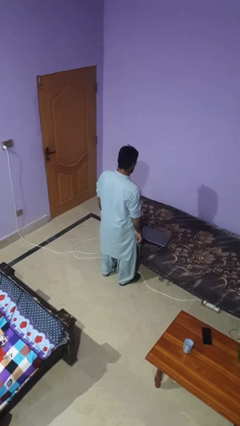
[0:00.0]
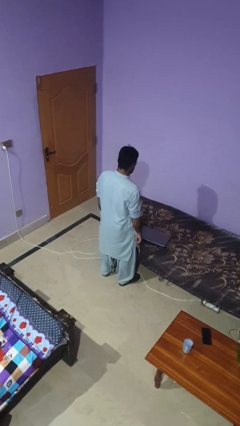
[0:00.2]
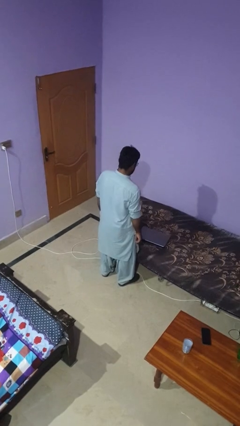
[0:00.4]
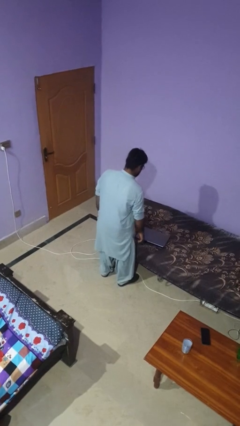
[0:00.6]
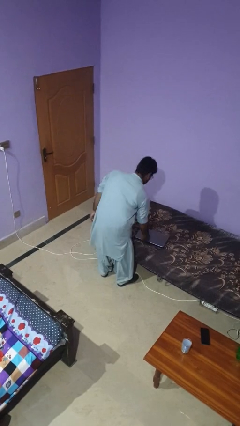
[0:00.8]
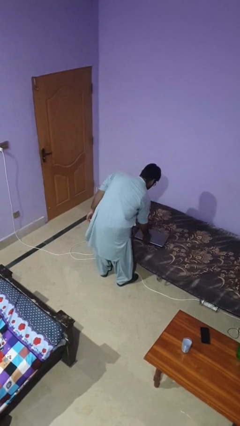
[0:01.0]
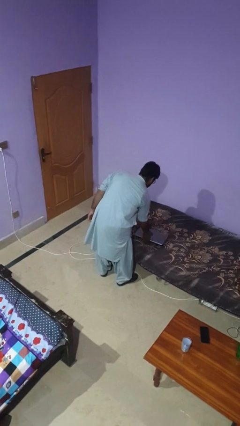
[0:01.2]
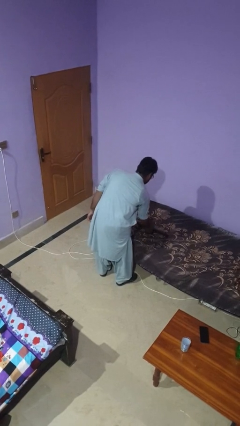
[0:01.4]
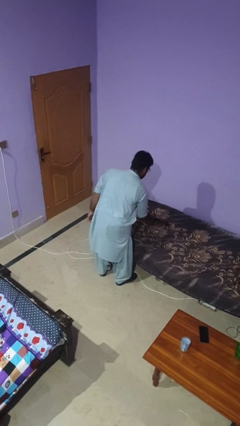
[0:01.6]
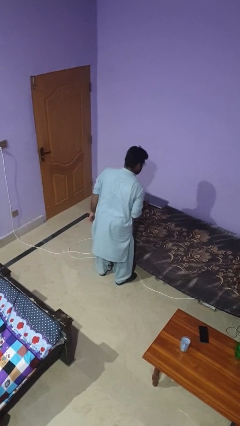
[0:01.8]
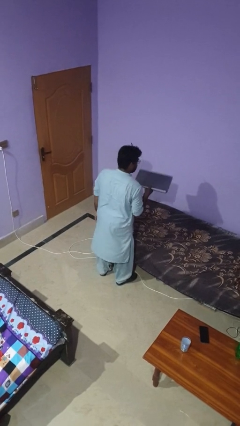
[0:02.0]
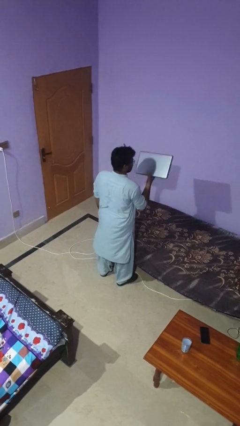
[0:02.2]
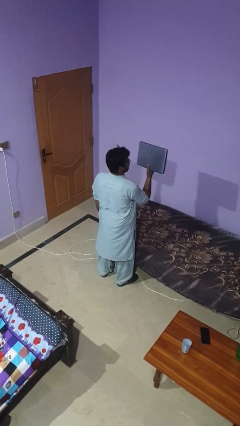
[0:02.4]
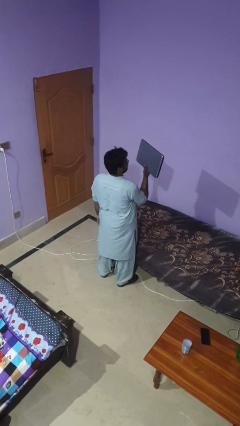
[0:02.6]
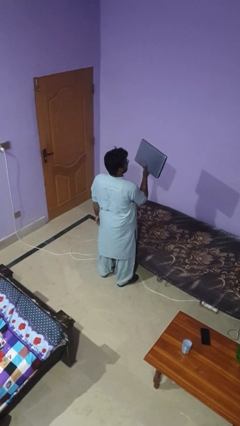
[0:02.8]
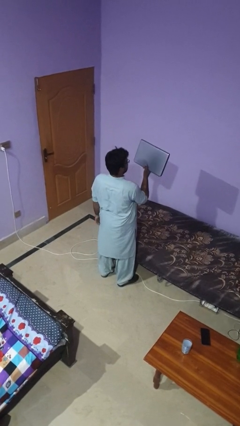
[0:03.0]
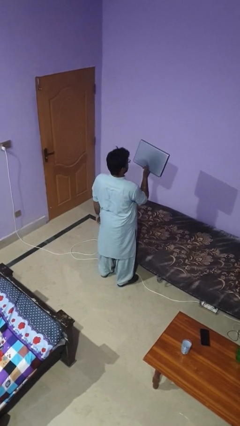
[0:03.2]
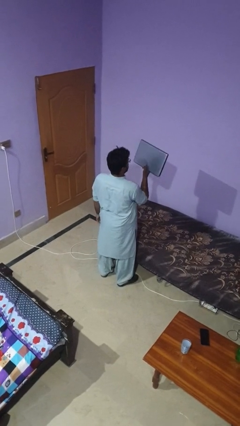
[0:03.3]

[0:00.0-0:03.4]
person picks up object from bed

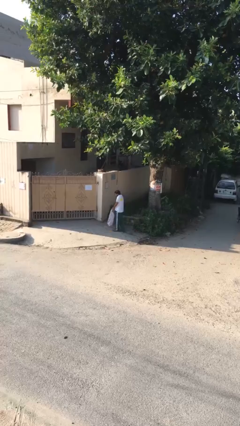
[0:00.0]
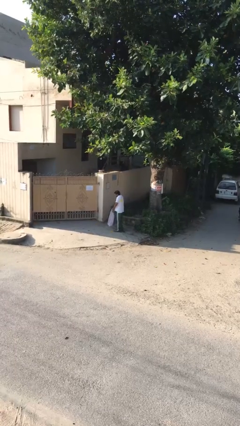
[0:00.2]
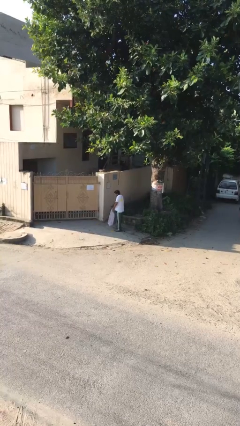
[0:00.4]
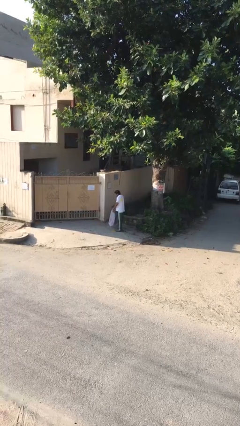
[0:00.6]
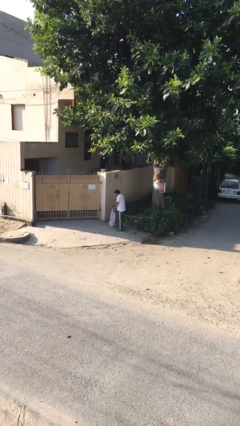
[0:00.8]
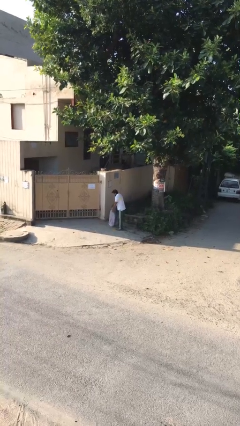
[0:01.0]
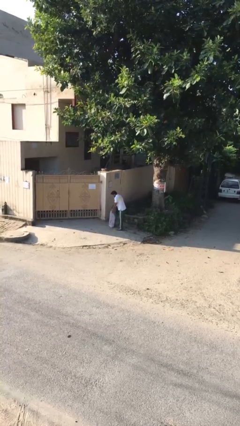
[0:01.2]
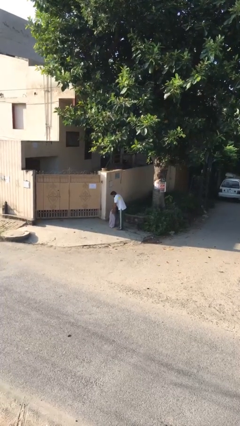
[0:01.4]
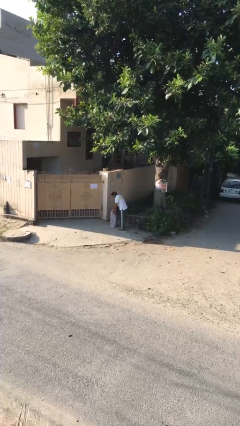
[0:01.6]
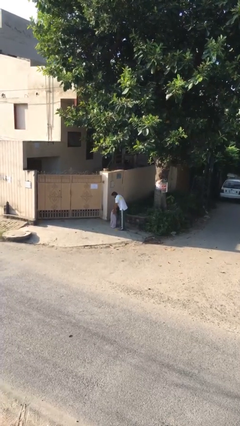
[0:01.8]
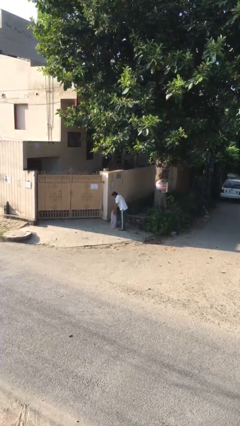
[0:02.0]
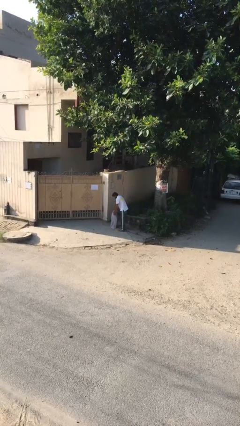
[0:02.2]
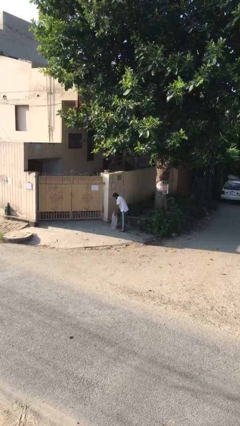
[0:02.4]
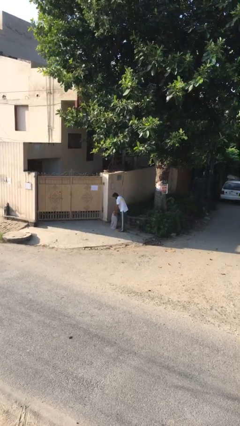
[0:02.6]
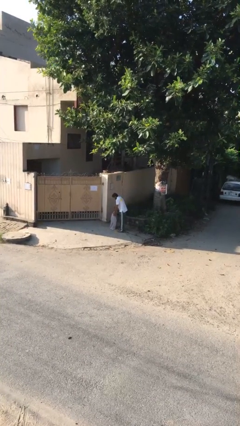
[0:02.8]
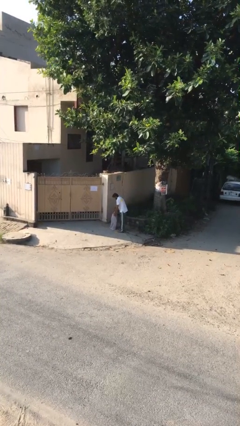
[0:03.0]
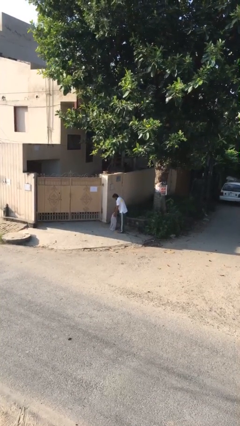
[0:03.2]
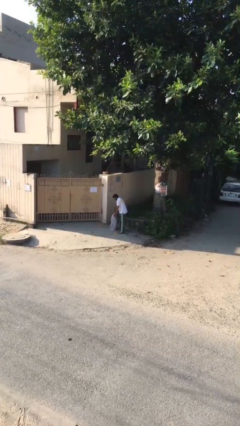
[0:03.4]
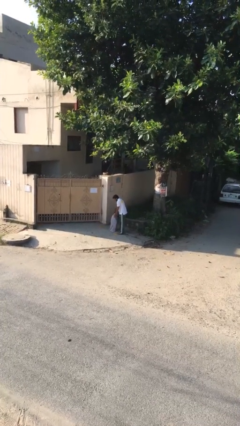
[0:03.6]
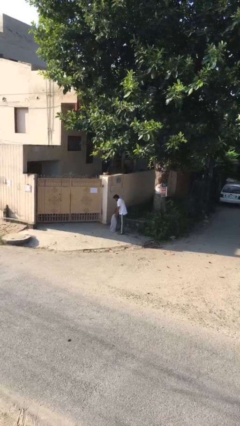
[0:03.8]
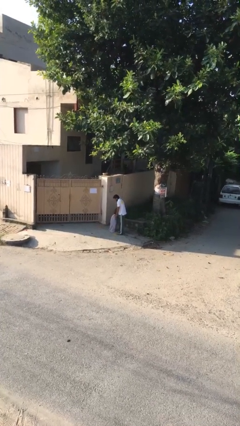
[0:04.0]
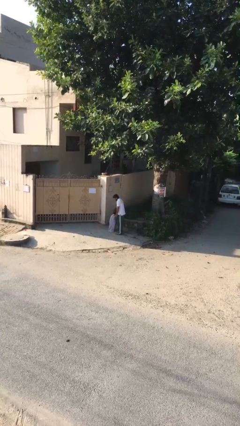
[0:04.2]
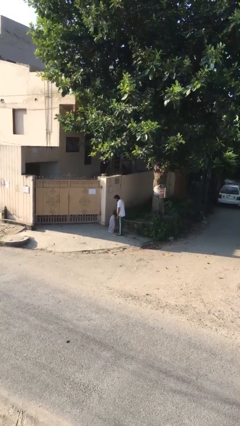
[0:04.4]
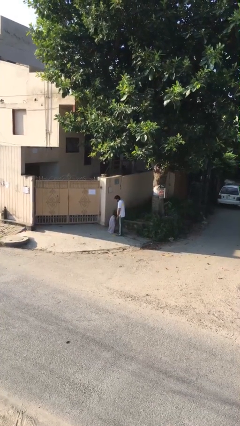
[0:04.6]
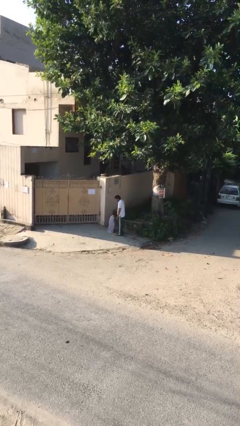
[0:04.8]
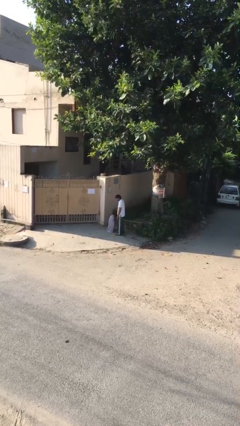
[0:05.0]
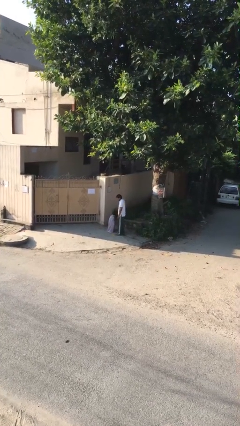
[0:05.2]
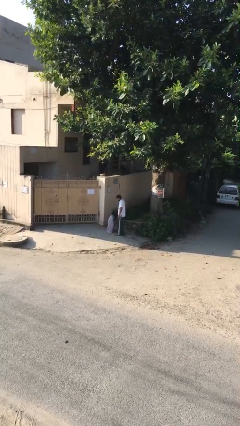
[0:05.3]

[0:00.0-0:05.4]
person puts down object on floor

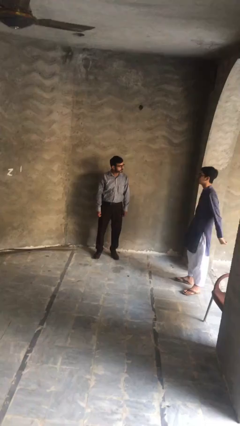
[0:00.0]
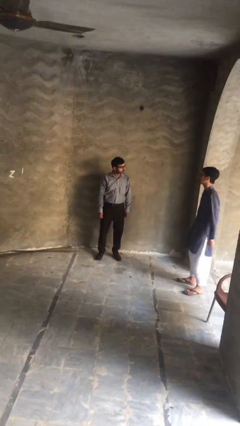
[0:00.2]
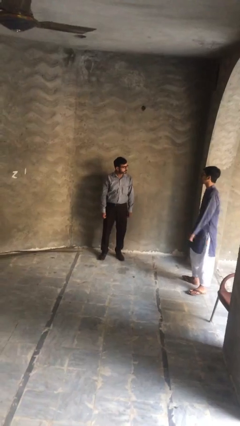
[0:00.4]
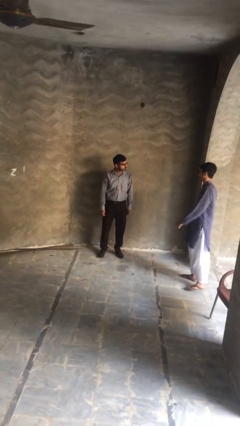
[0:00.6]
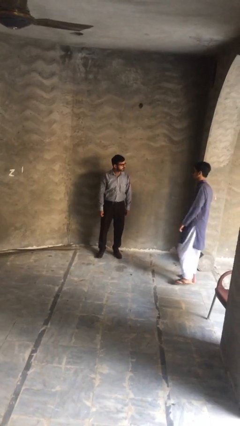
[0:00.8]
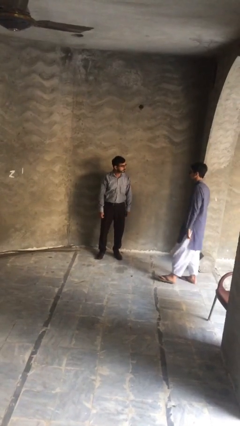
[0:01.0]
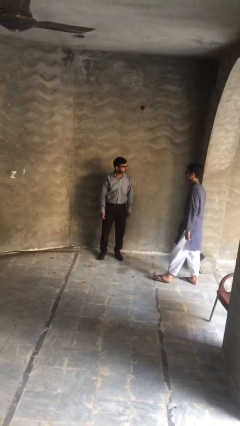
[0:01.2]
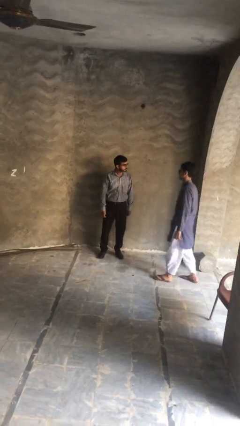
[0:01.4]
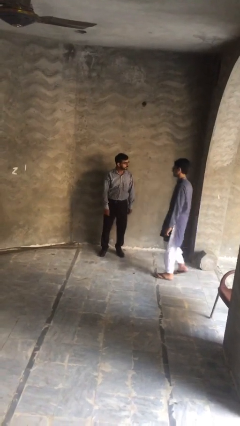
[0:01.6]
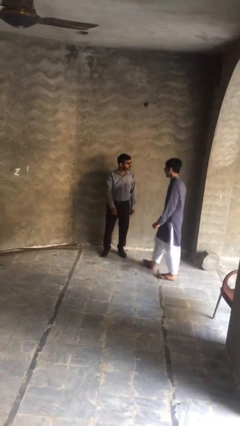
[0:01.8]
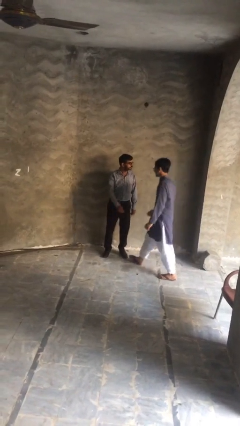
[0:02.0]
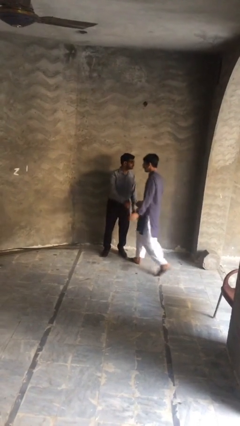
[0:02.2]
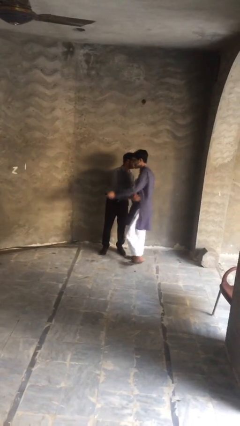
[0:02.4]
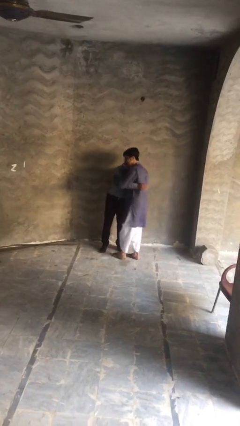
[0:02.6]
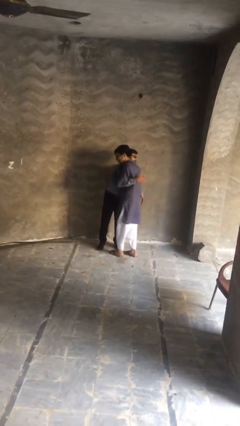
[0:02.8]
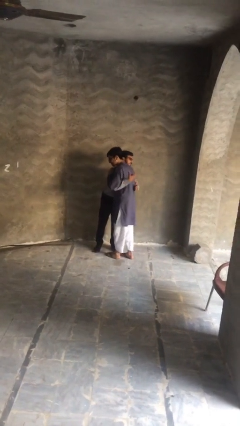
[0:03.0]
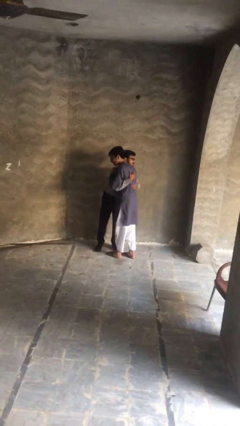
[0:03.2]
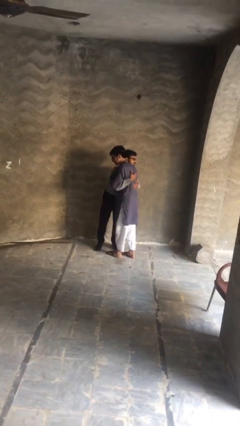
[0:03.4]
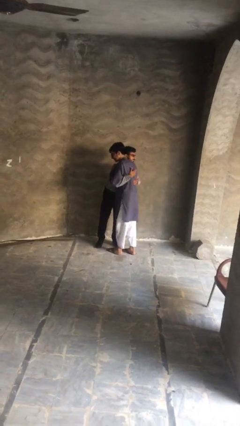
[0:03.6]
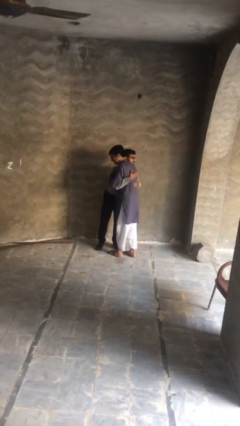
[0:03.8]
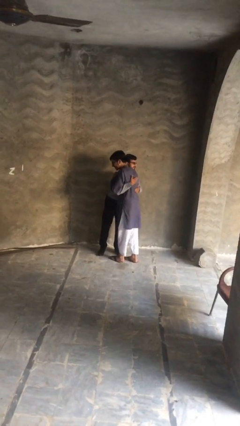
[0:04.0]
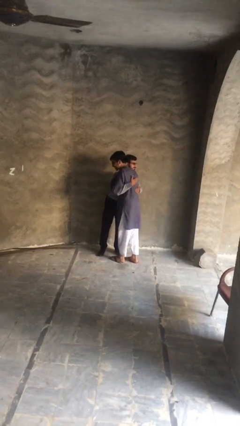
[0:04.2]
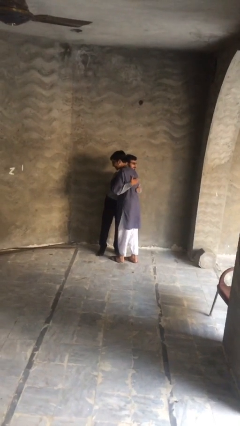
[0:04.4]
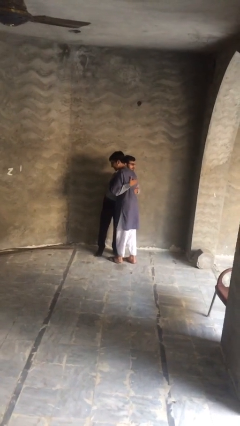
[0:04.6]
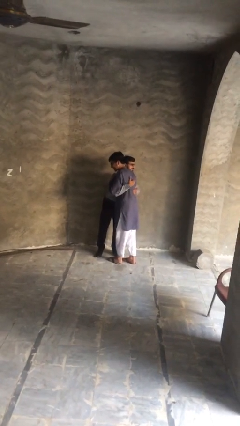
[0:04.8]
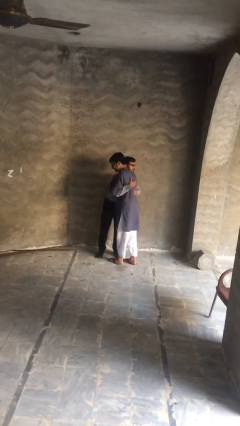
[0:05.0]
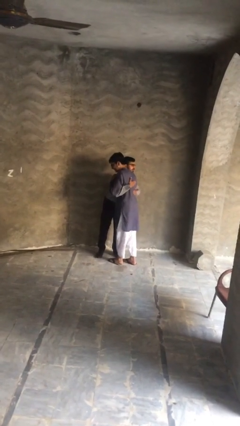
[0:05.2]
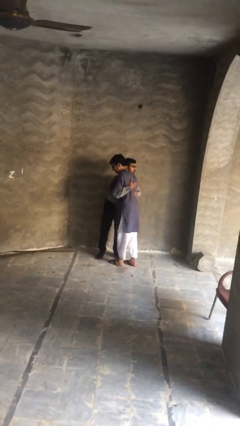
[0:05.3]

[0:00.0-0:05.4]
person embraces person

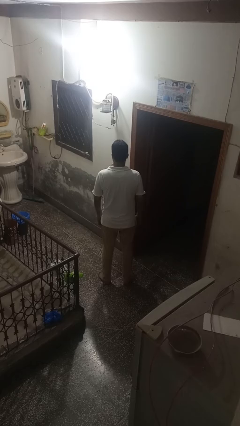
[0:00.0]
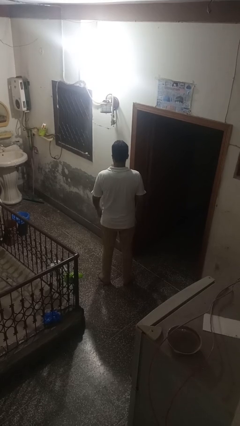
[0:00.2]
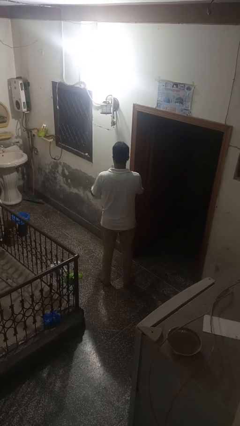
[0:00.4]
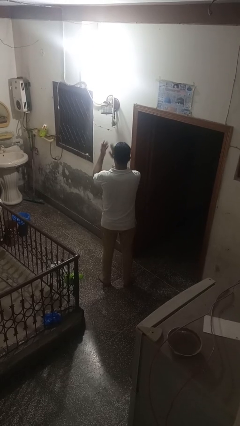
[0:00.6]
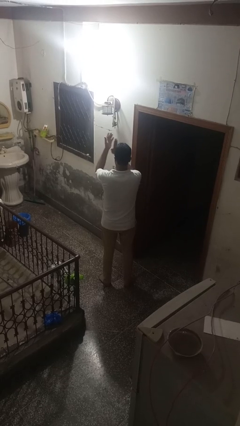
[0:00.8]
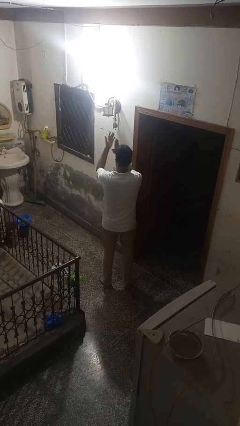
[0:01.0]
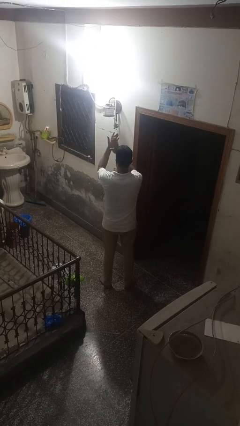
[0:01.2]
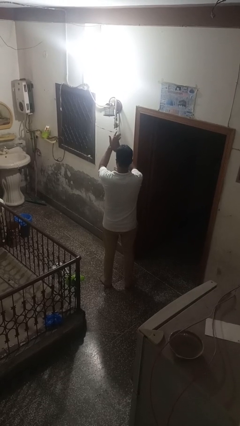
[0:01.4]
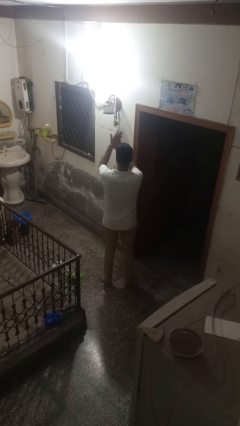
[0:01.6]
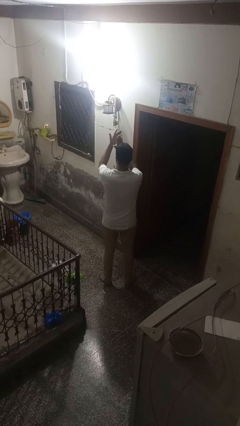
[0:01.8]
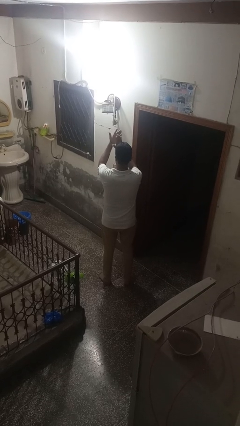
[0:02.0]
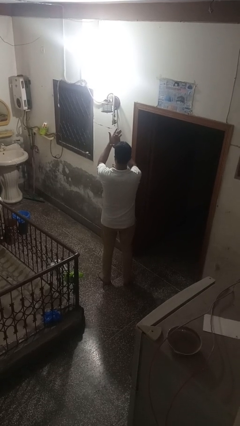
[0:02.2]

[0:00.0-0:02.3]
person claps hands

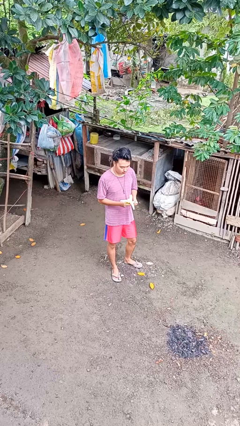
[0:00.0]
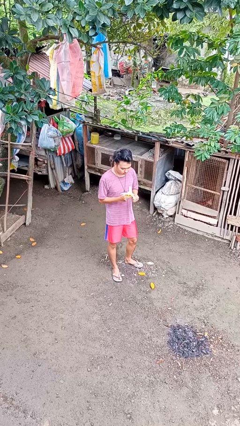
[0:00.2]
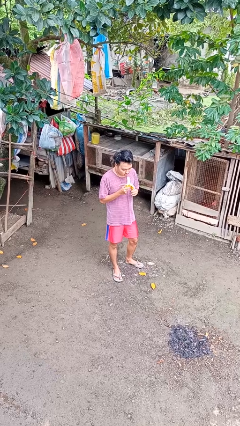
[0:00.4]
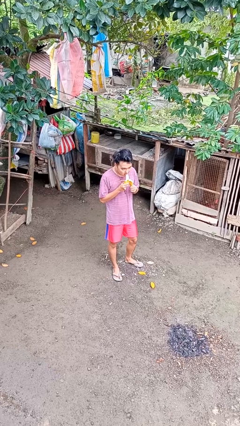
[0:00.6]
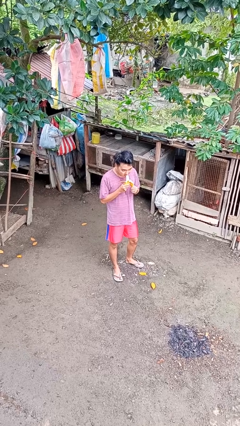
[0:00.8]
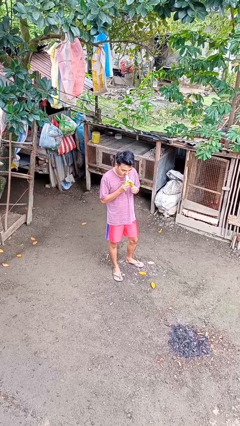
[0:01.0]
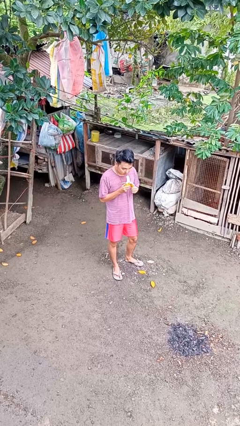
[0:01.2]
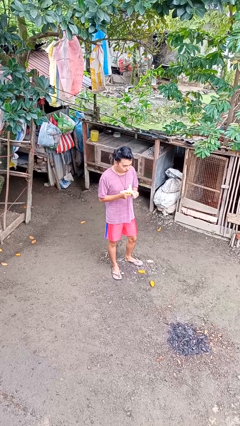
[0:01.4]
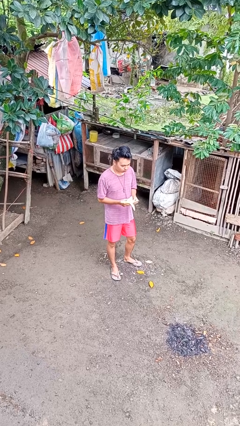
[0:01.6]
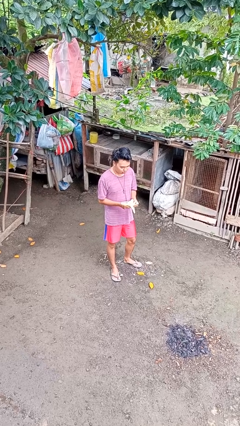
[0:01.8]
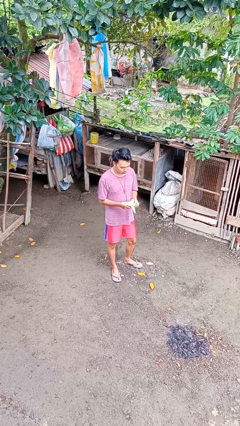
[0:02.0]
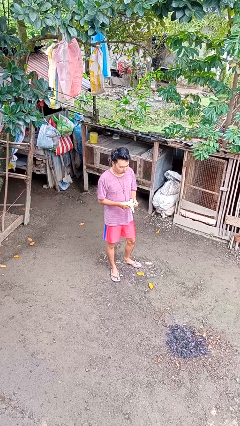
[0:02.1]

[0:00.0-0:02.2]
person eats banana
